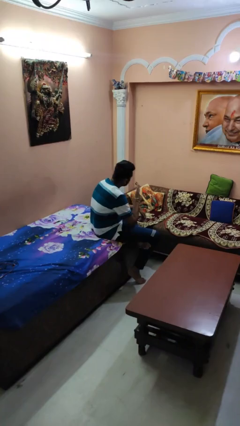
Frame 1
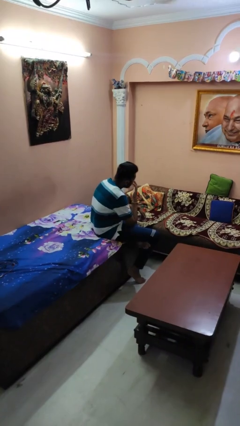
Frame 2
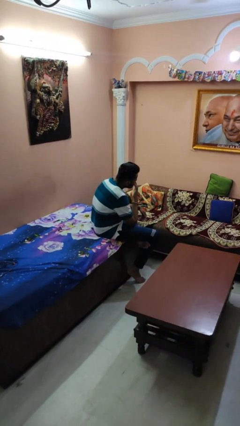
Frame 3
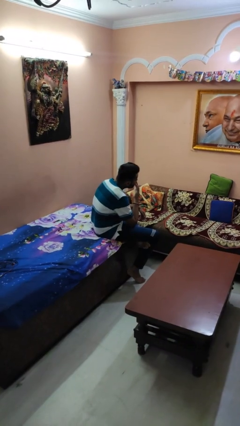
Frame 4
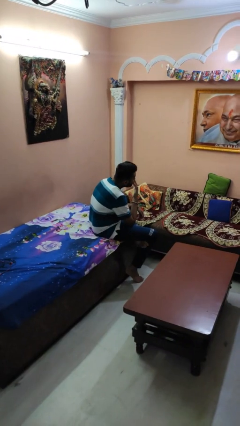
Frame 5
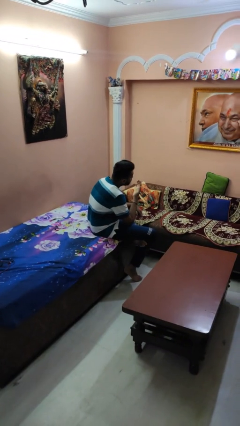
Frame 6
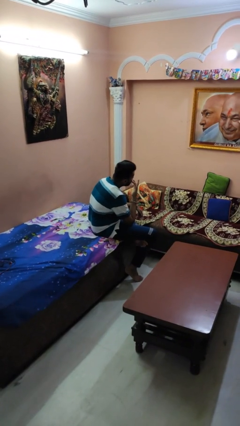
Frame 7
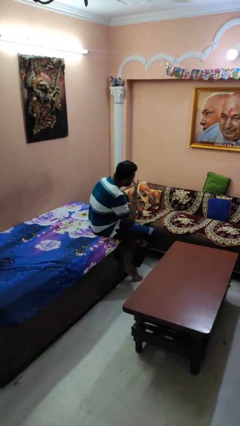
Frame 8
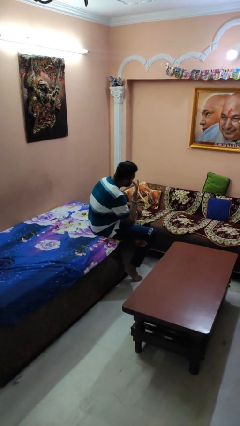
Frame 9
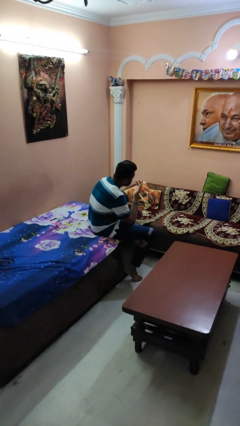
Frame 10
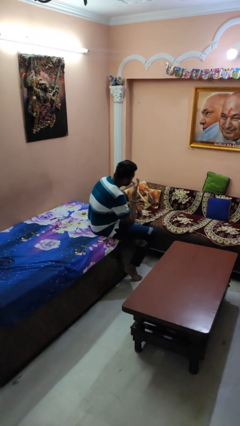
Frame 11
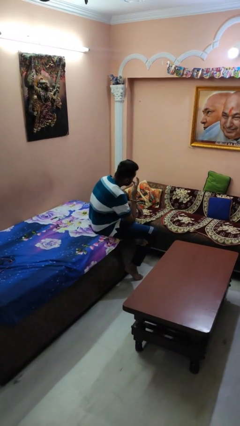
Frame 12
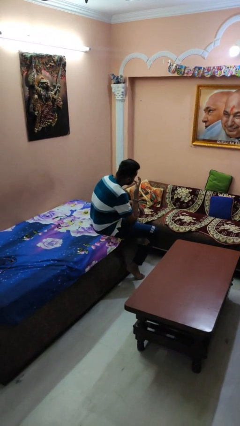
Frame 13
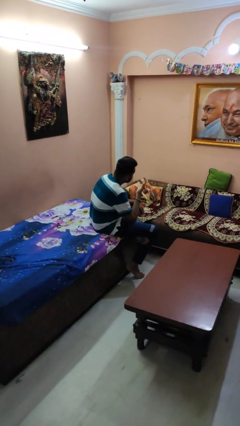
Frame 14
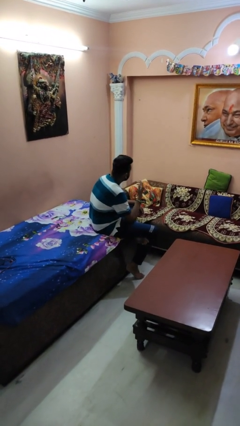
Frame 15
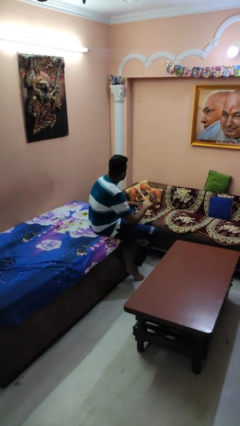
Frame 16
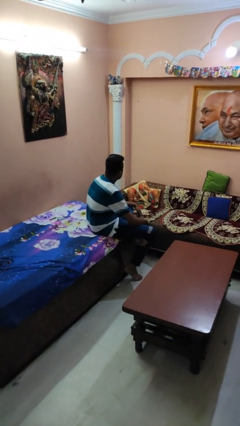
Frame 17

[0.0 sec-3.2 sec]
person licks fingers

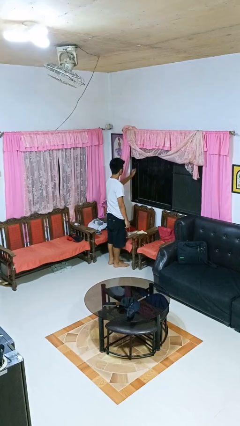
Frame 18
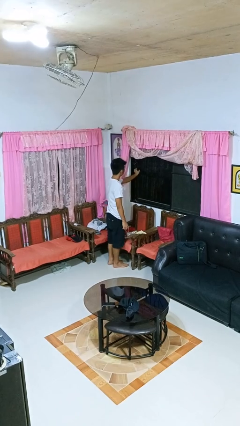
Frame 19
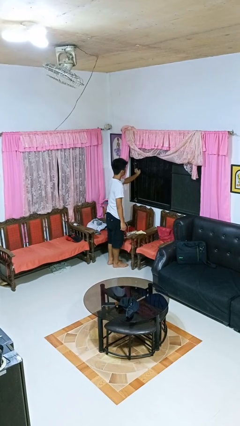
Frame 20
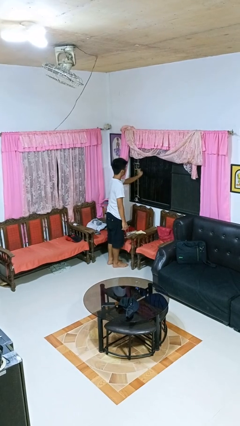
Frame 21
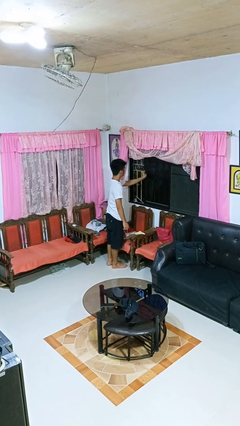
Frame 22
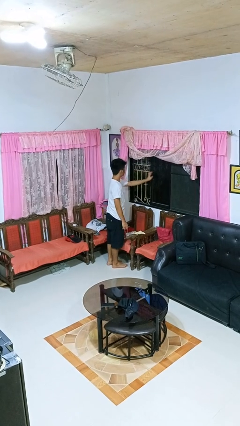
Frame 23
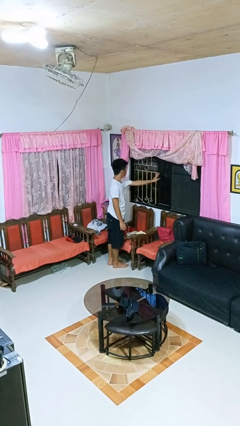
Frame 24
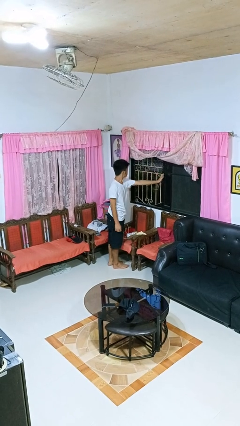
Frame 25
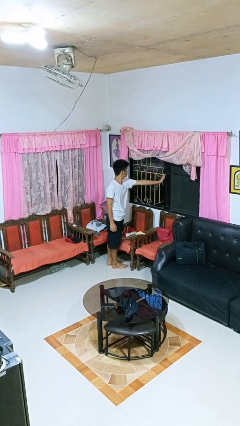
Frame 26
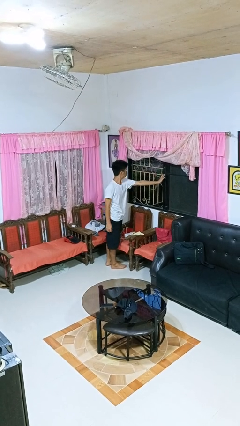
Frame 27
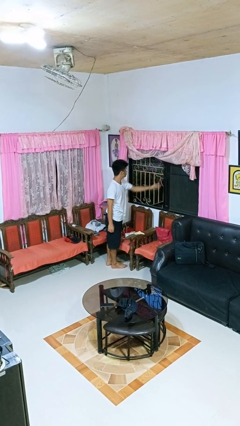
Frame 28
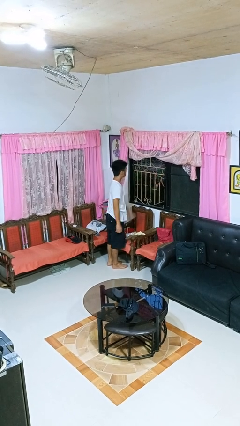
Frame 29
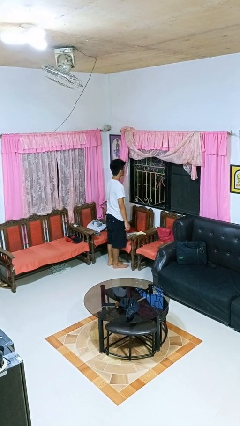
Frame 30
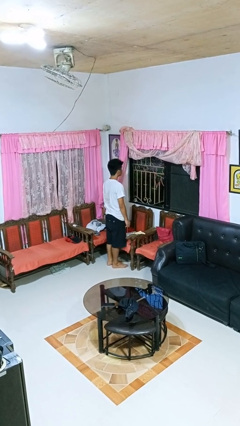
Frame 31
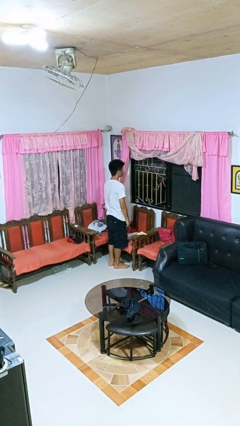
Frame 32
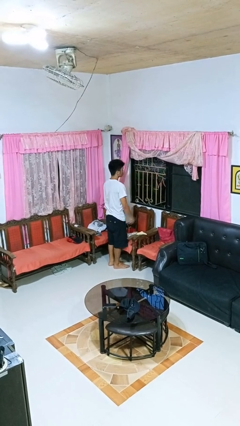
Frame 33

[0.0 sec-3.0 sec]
person opens home window

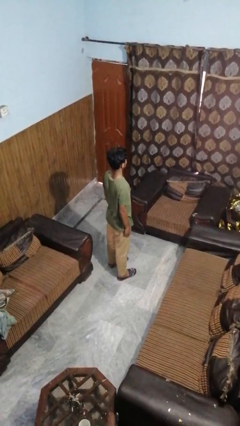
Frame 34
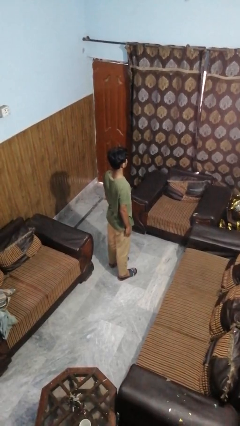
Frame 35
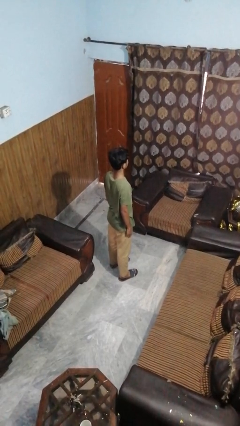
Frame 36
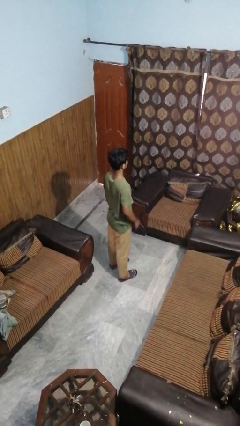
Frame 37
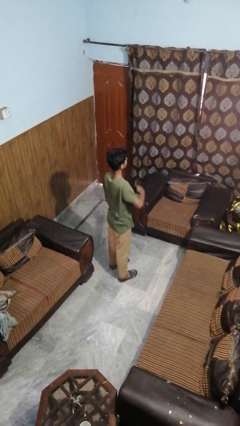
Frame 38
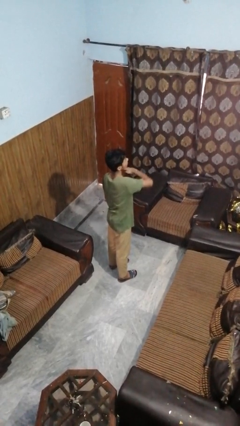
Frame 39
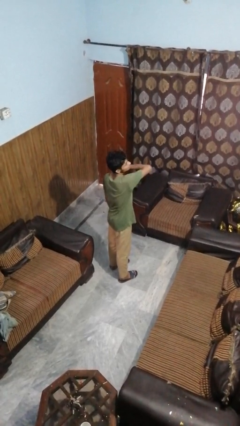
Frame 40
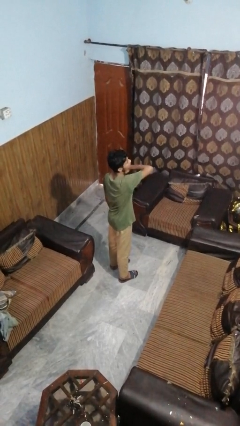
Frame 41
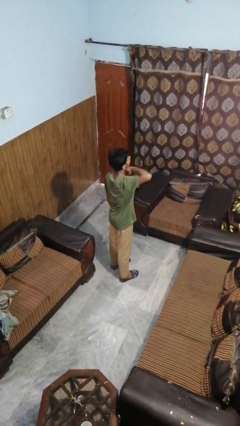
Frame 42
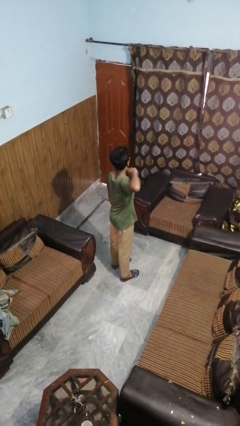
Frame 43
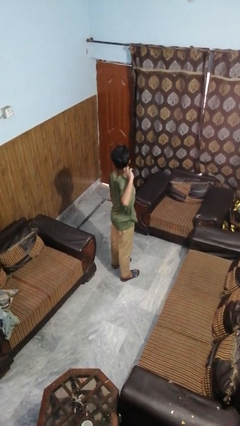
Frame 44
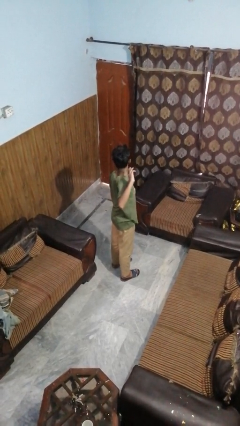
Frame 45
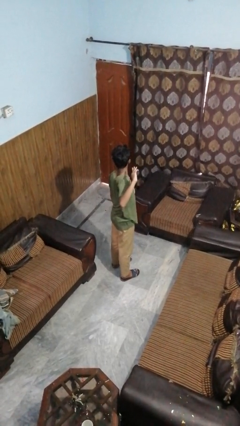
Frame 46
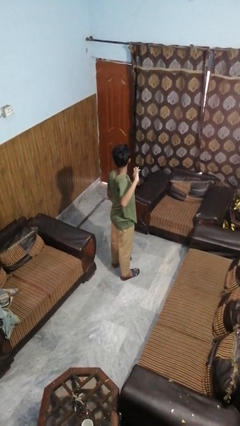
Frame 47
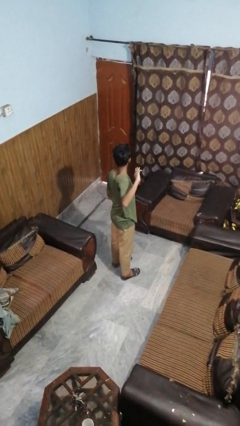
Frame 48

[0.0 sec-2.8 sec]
person gestures cut

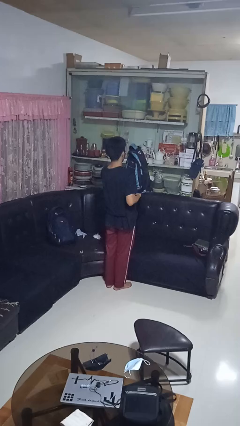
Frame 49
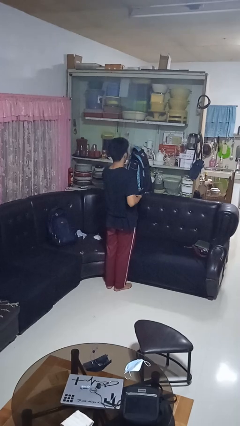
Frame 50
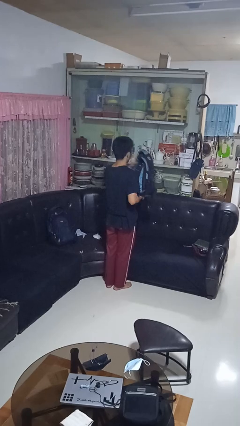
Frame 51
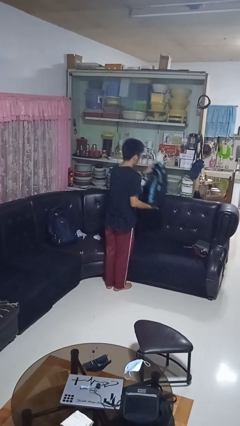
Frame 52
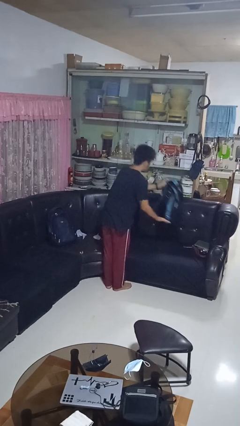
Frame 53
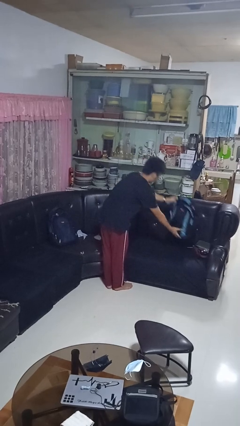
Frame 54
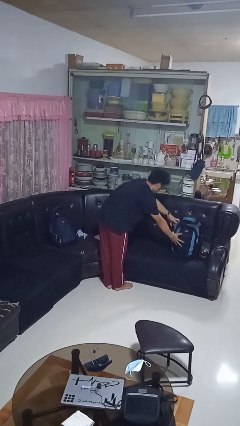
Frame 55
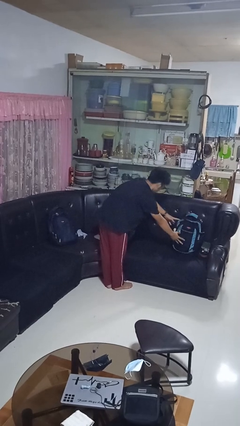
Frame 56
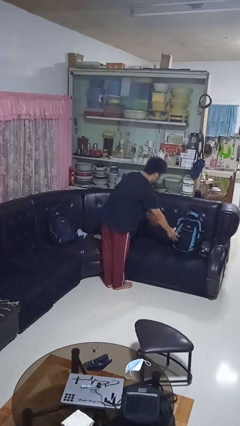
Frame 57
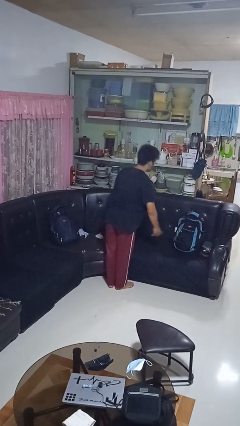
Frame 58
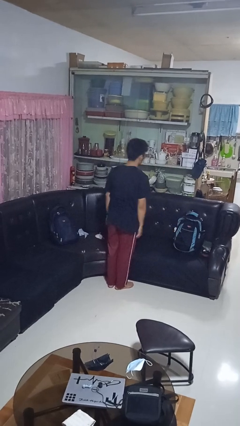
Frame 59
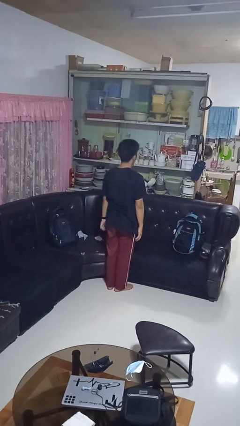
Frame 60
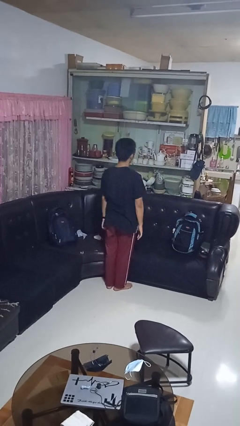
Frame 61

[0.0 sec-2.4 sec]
person puts down object on couch

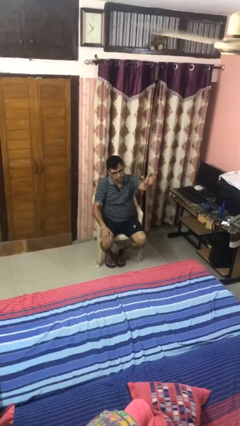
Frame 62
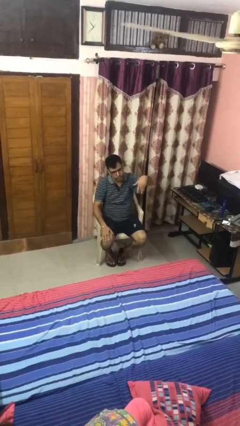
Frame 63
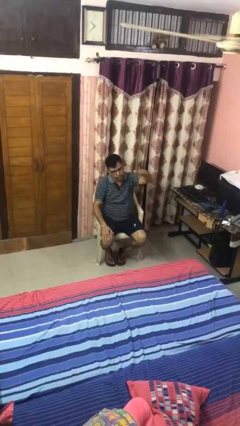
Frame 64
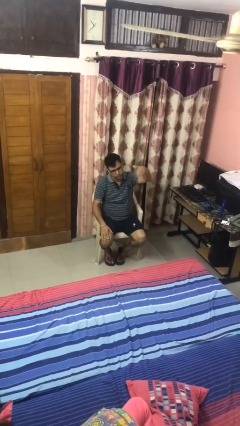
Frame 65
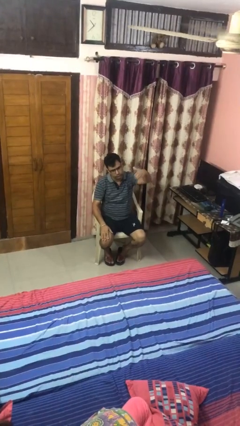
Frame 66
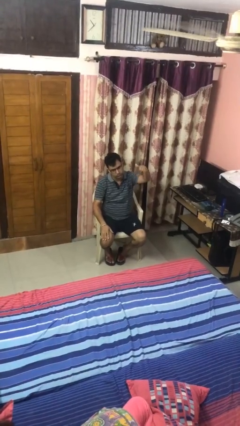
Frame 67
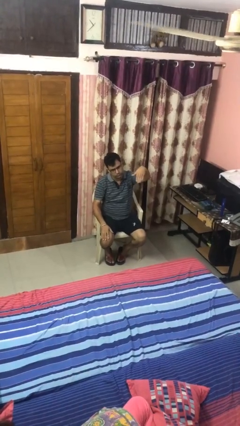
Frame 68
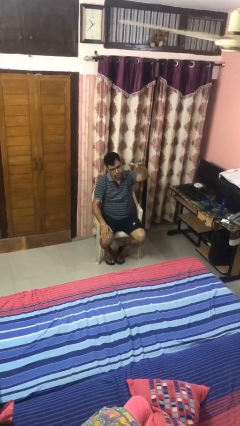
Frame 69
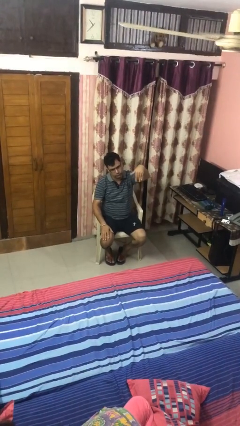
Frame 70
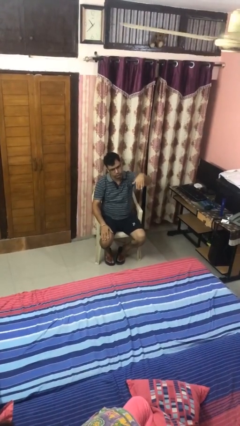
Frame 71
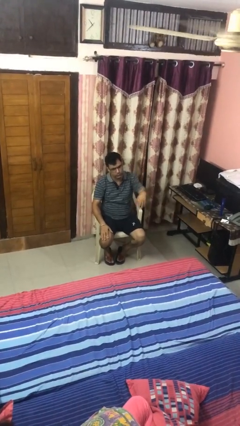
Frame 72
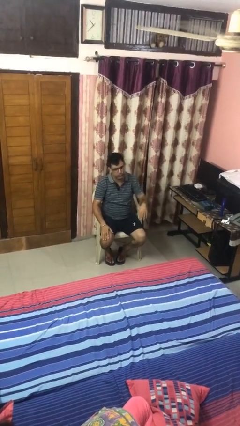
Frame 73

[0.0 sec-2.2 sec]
person gestures come here

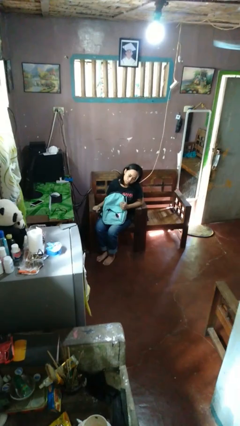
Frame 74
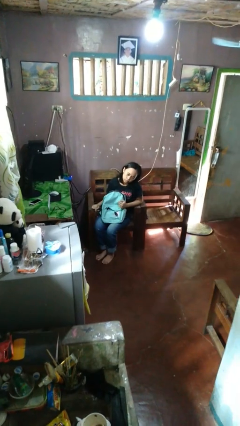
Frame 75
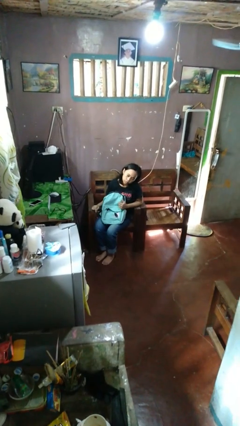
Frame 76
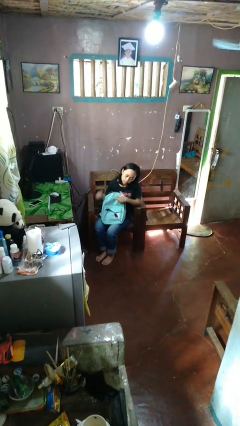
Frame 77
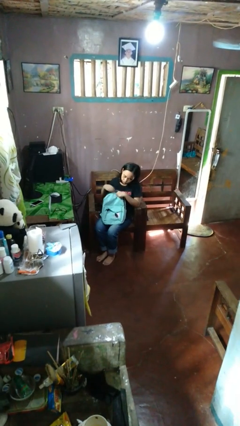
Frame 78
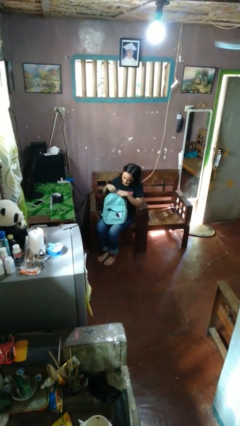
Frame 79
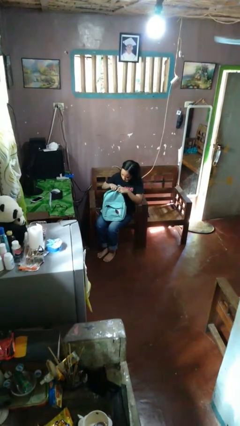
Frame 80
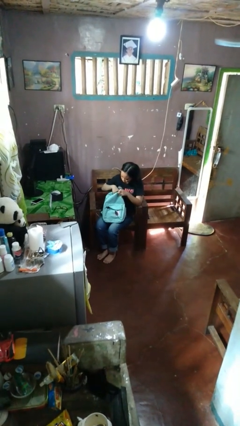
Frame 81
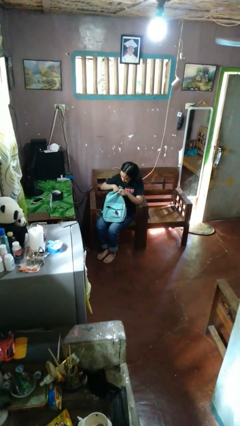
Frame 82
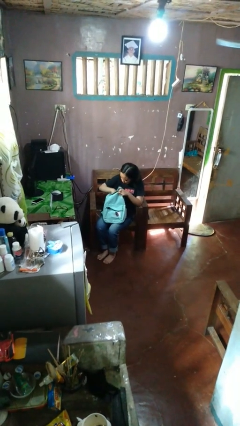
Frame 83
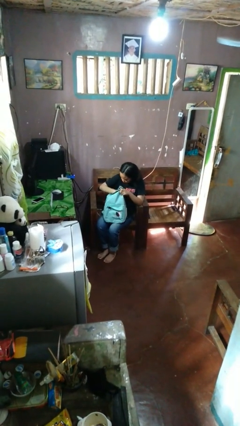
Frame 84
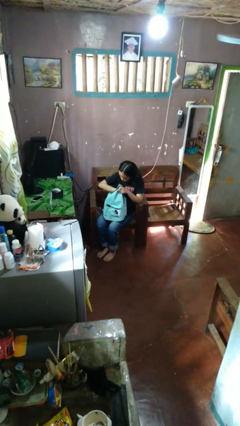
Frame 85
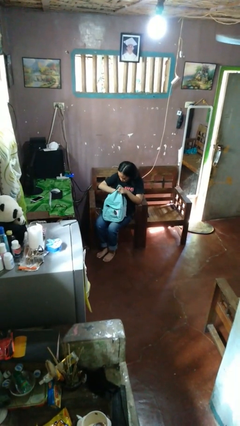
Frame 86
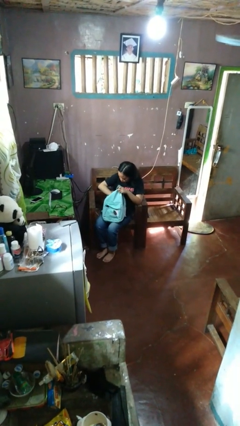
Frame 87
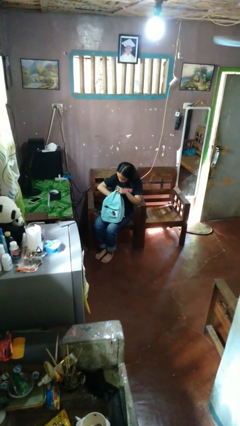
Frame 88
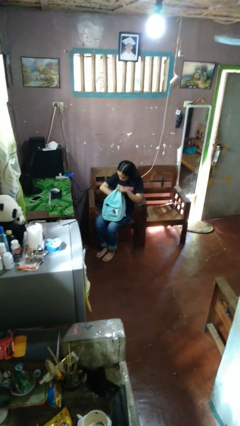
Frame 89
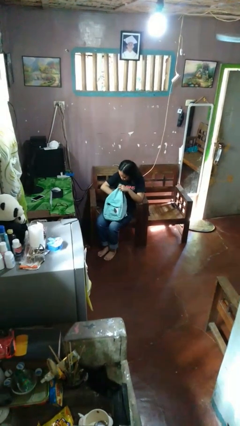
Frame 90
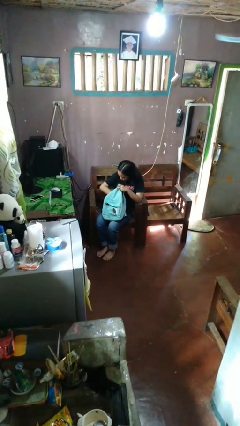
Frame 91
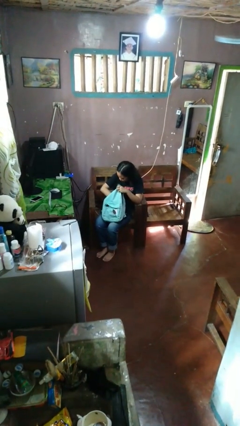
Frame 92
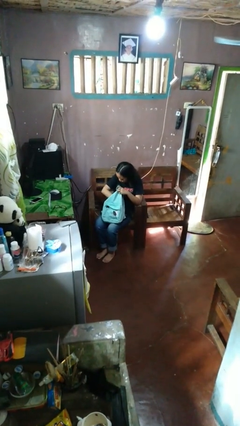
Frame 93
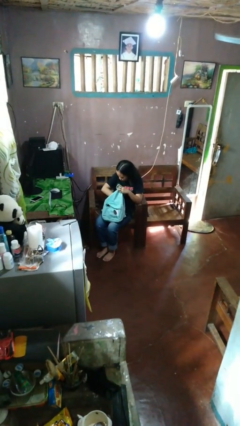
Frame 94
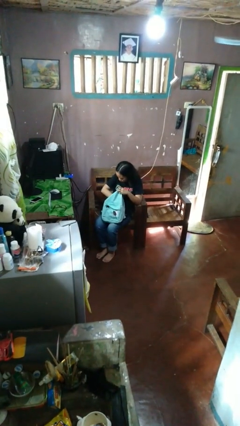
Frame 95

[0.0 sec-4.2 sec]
person searches in backpack
